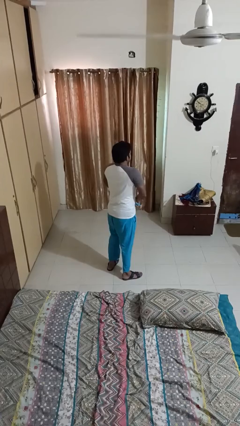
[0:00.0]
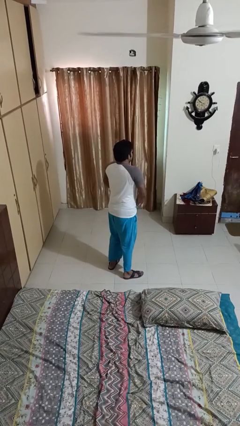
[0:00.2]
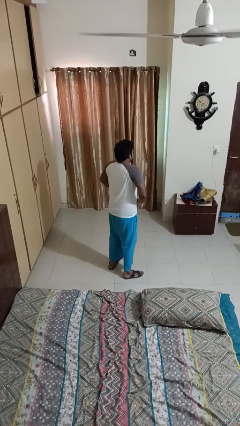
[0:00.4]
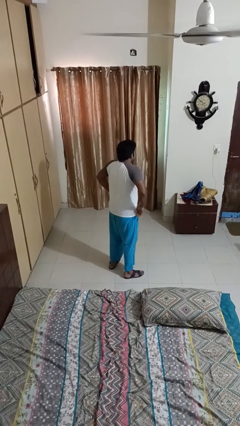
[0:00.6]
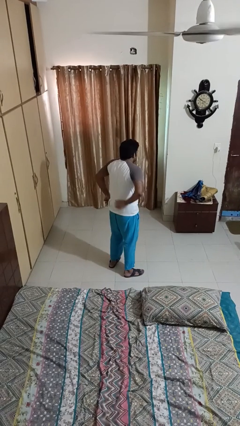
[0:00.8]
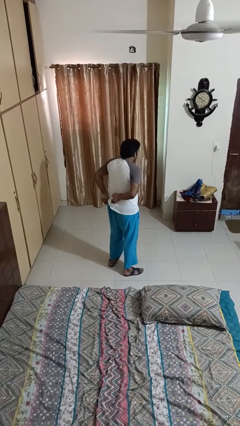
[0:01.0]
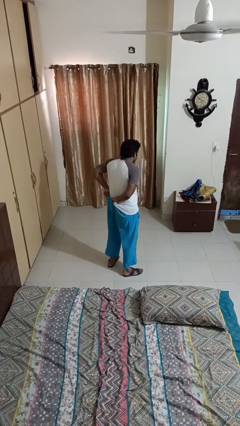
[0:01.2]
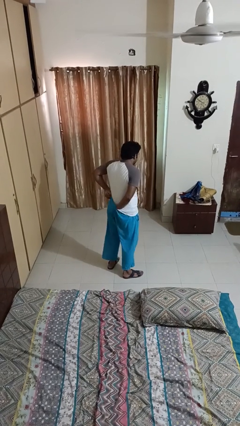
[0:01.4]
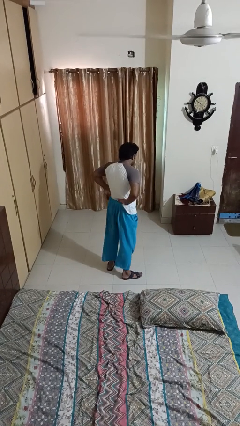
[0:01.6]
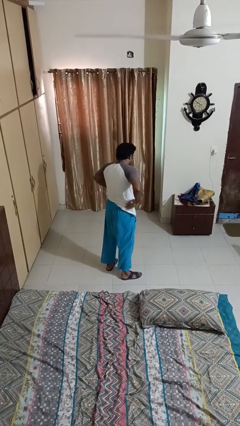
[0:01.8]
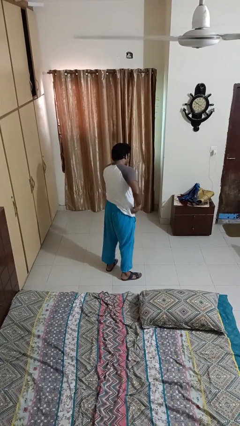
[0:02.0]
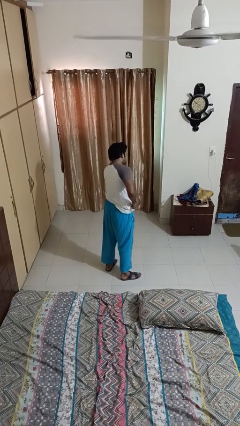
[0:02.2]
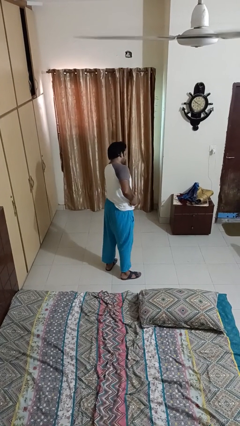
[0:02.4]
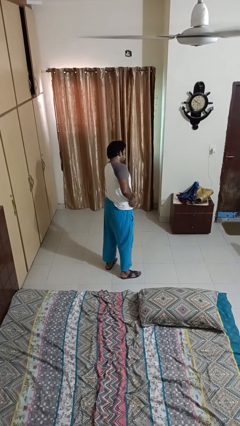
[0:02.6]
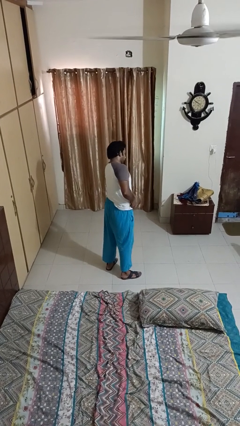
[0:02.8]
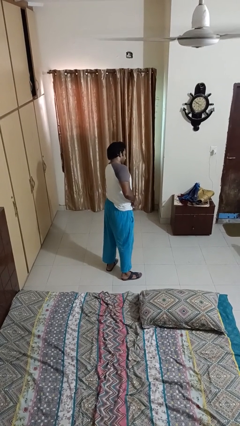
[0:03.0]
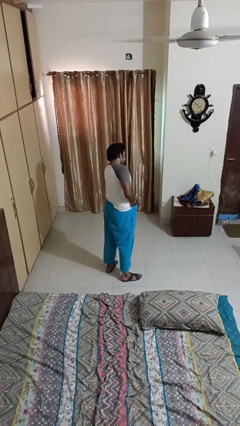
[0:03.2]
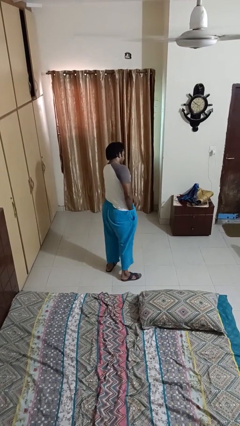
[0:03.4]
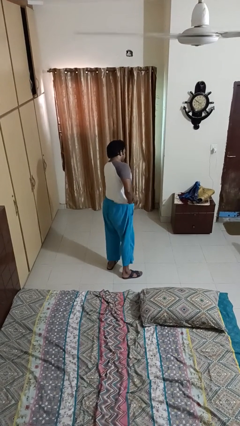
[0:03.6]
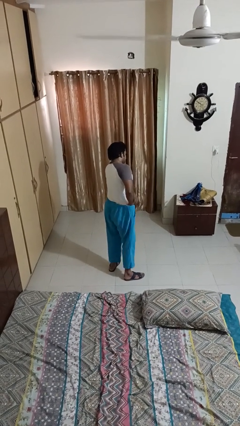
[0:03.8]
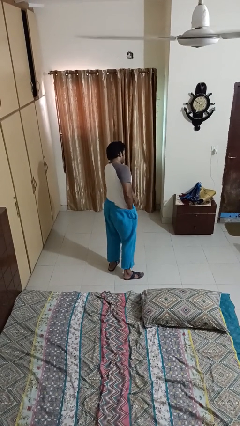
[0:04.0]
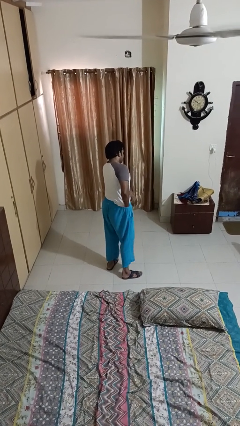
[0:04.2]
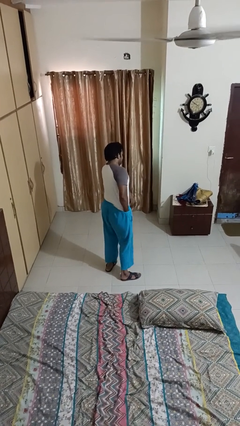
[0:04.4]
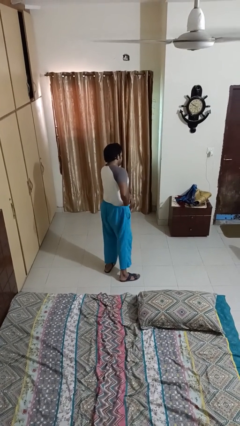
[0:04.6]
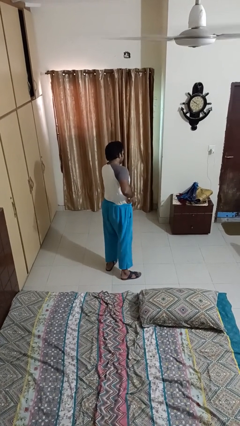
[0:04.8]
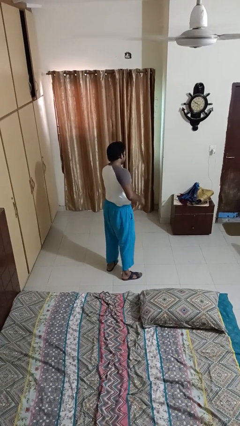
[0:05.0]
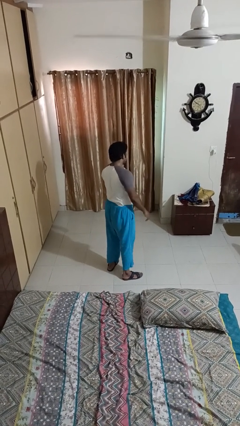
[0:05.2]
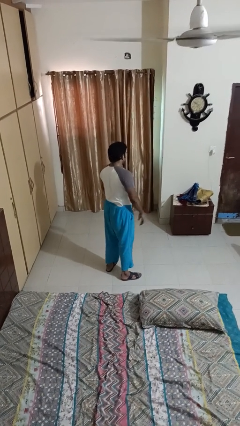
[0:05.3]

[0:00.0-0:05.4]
person tucks in shirt

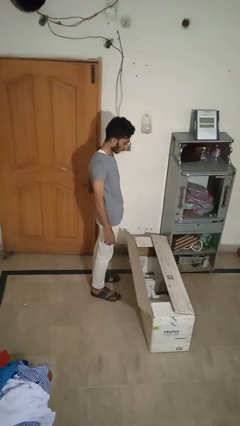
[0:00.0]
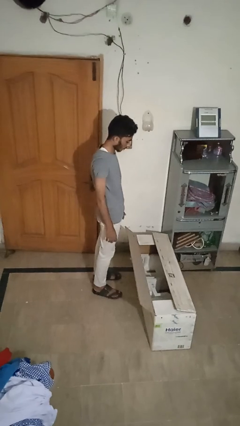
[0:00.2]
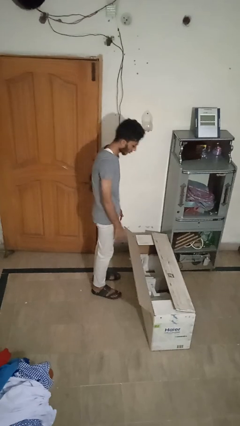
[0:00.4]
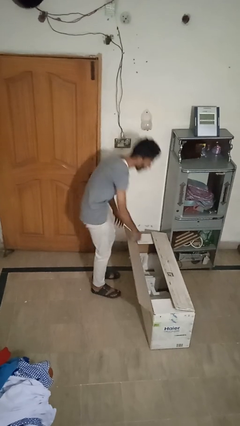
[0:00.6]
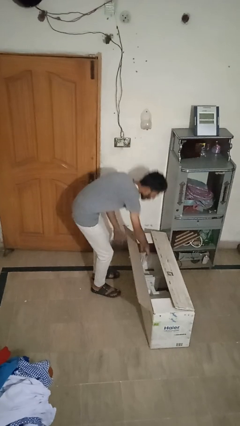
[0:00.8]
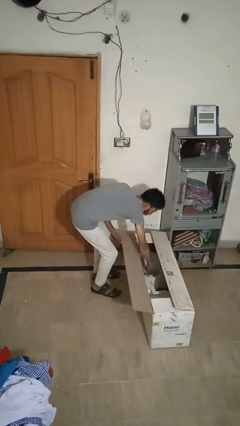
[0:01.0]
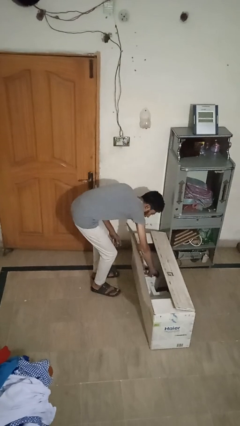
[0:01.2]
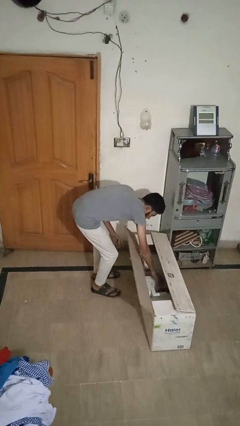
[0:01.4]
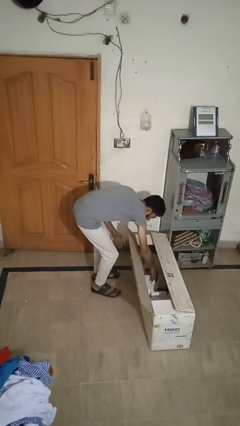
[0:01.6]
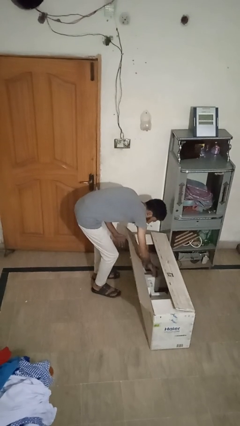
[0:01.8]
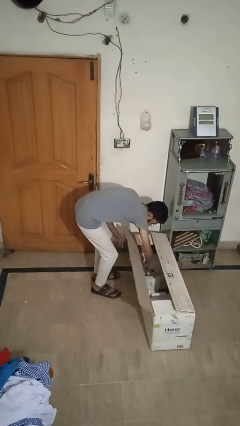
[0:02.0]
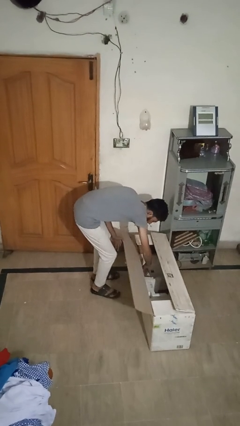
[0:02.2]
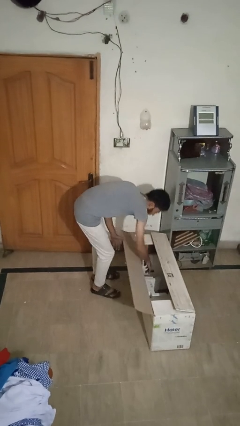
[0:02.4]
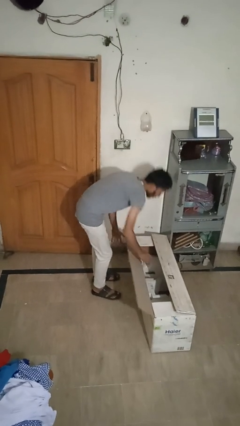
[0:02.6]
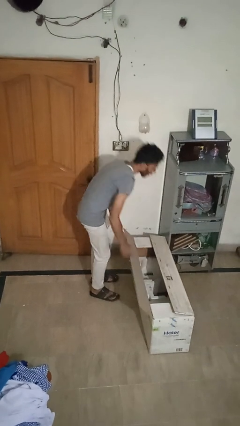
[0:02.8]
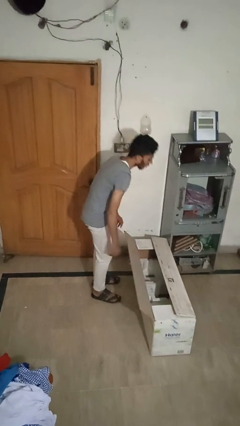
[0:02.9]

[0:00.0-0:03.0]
person searches in box

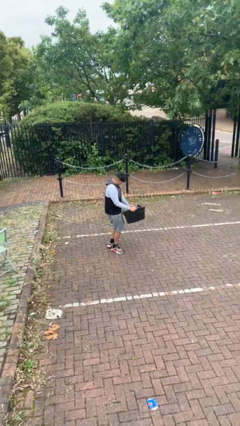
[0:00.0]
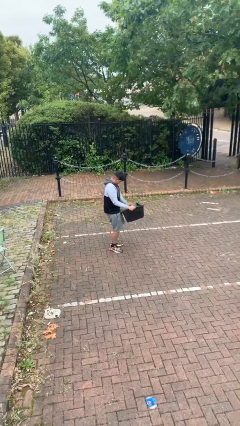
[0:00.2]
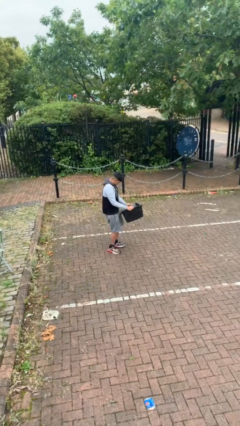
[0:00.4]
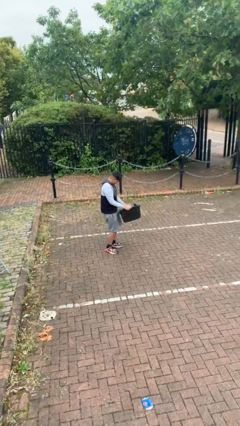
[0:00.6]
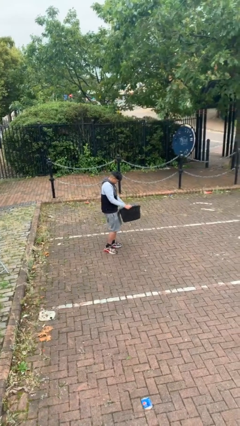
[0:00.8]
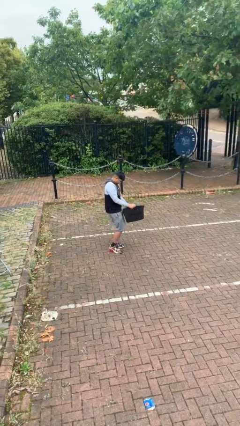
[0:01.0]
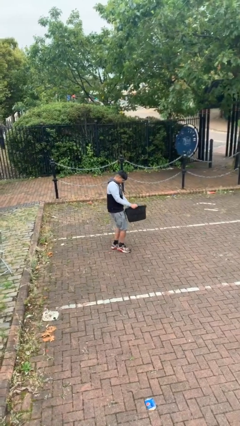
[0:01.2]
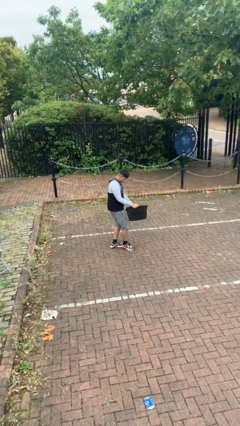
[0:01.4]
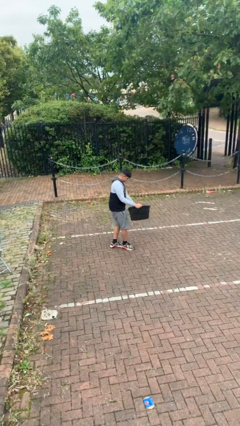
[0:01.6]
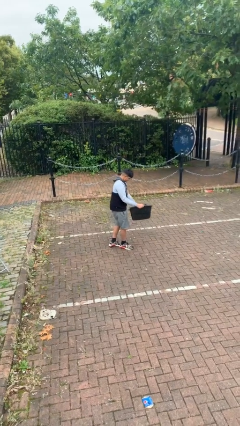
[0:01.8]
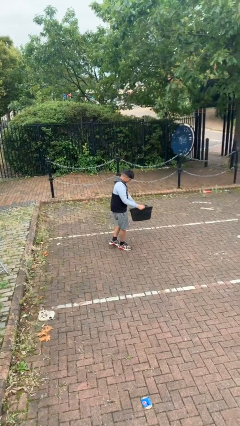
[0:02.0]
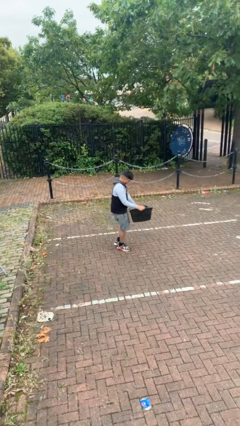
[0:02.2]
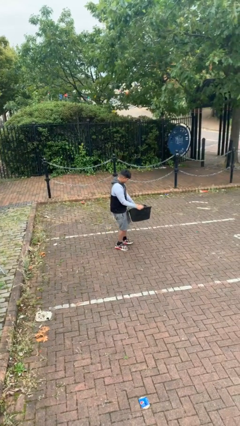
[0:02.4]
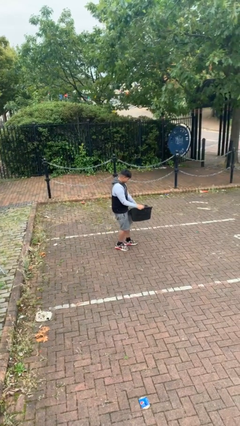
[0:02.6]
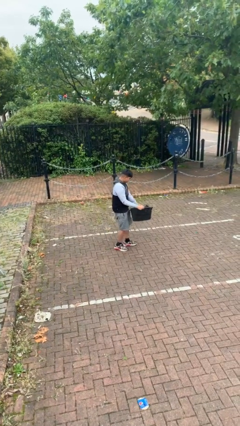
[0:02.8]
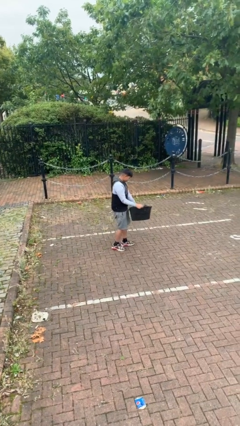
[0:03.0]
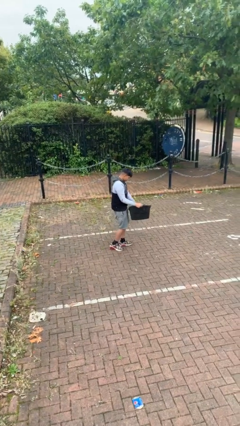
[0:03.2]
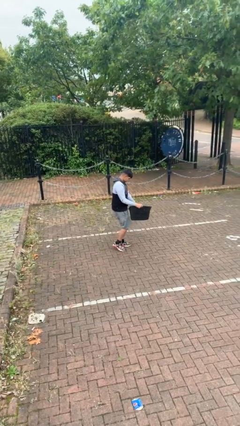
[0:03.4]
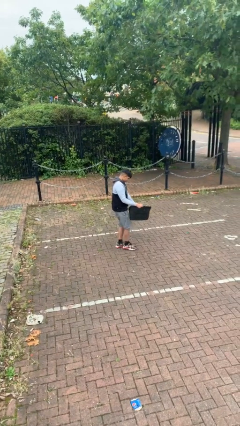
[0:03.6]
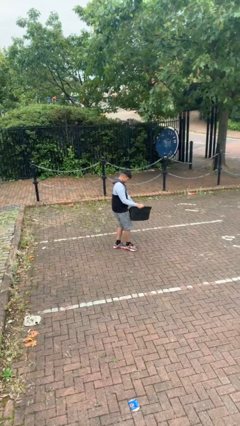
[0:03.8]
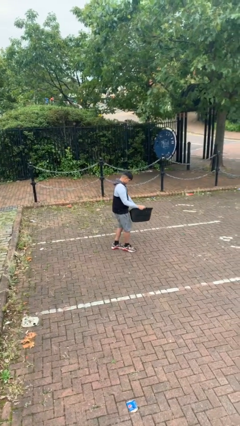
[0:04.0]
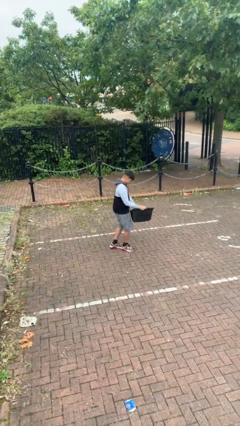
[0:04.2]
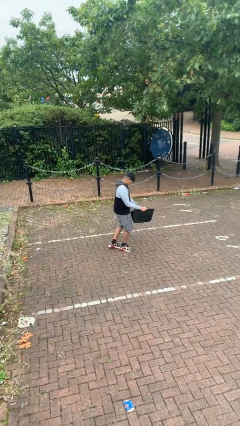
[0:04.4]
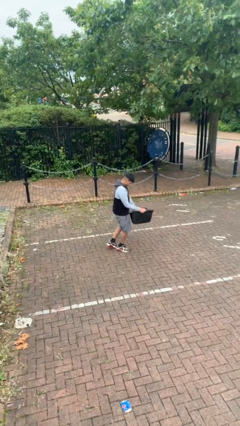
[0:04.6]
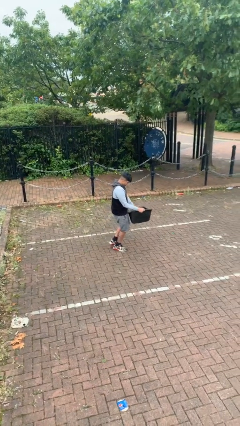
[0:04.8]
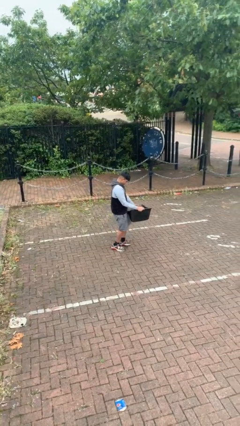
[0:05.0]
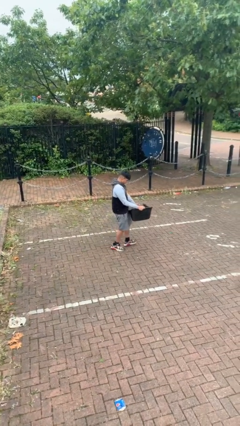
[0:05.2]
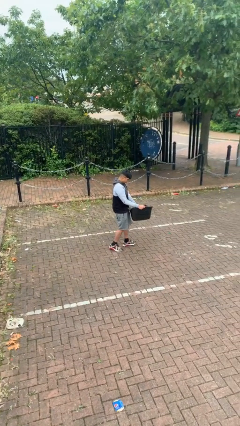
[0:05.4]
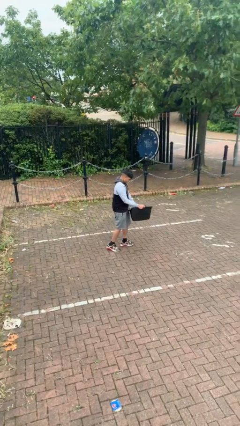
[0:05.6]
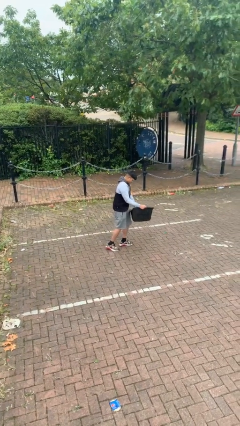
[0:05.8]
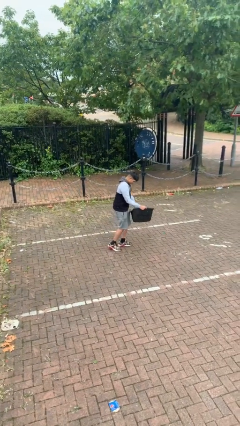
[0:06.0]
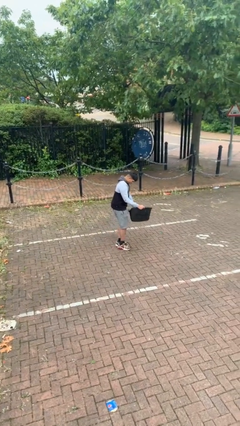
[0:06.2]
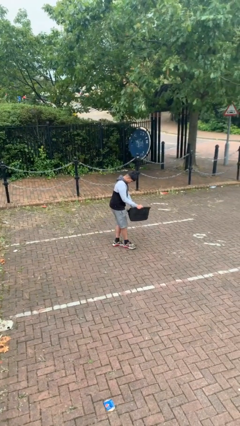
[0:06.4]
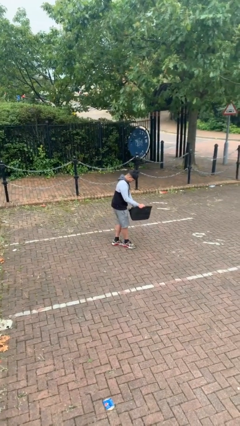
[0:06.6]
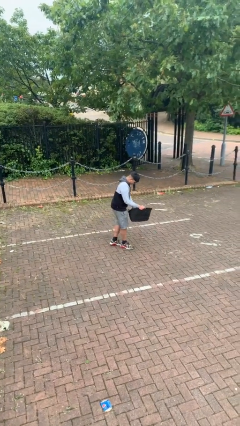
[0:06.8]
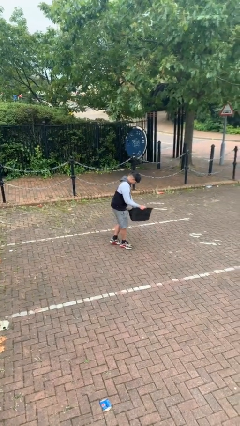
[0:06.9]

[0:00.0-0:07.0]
person carries heavy object

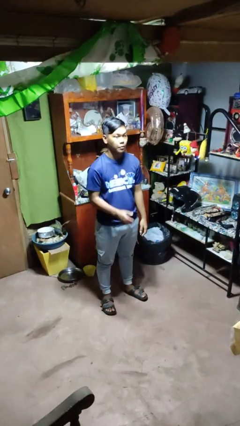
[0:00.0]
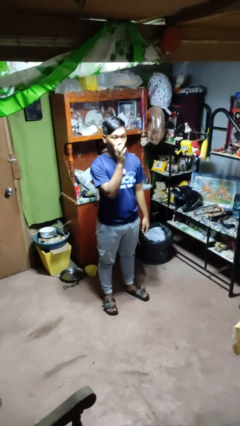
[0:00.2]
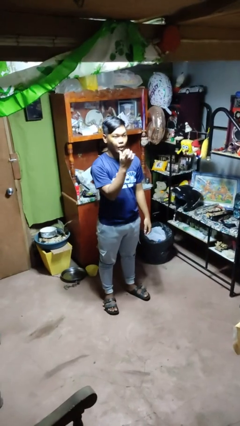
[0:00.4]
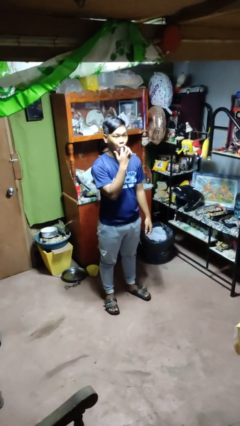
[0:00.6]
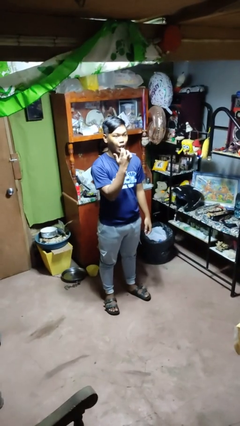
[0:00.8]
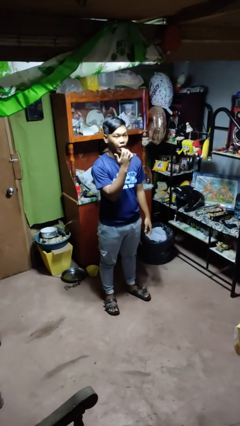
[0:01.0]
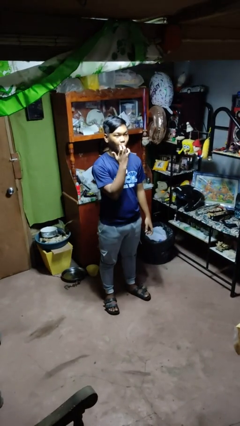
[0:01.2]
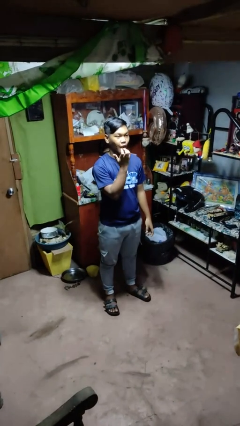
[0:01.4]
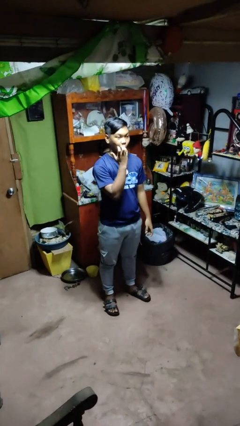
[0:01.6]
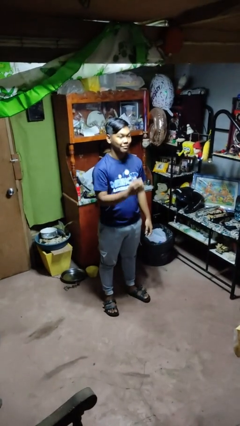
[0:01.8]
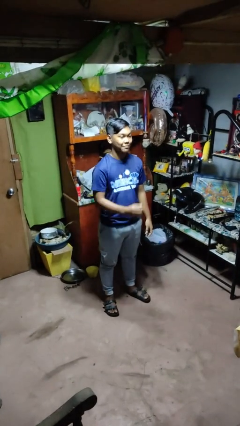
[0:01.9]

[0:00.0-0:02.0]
person licks fingers

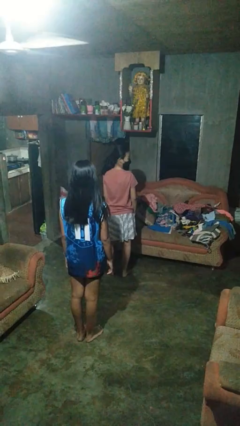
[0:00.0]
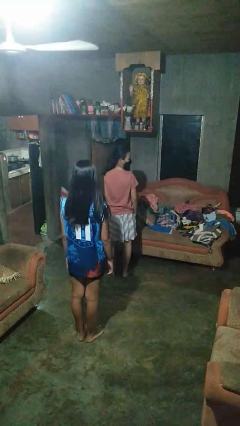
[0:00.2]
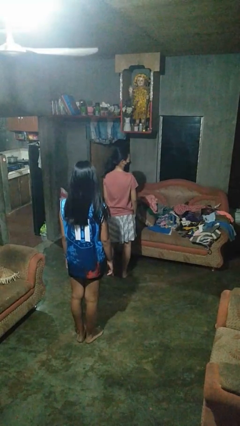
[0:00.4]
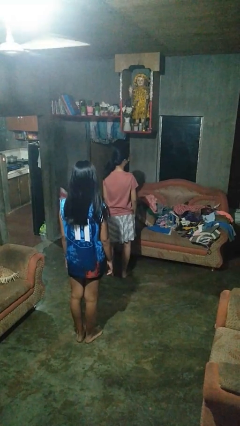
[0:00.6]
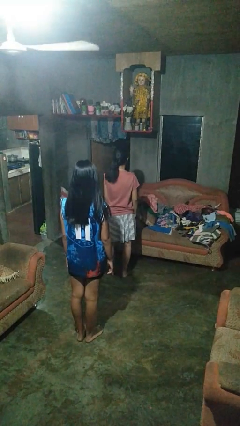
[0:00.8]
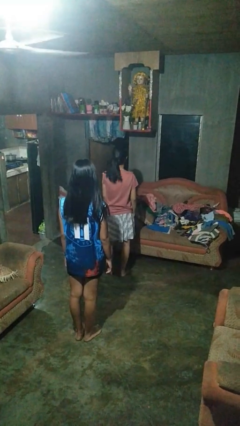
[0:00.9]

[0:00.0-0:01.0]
person looks over shoulder
